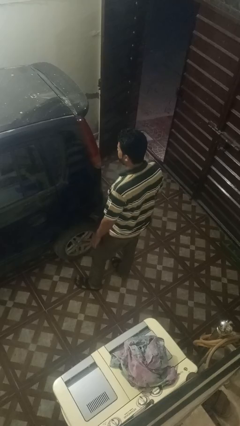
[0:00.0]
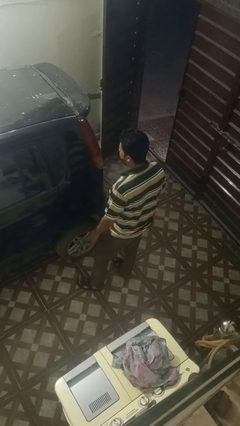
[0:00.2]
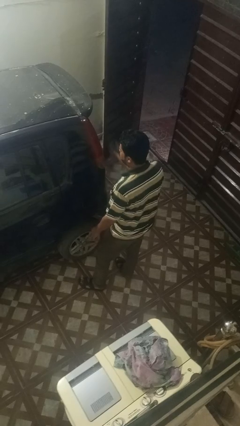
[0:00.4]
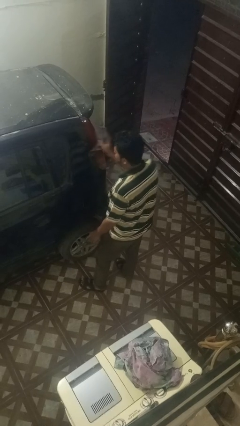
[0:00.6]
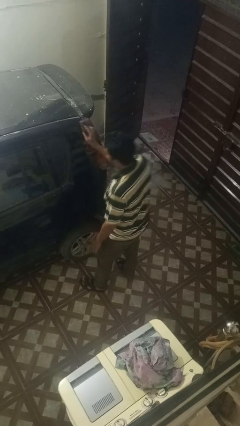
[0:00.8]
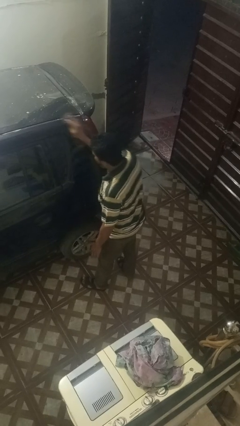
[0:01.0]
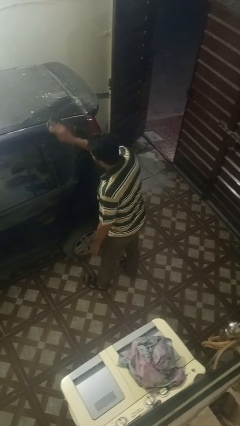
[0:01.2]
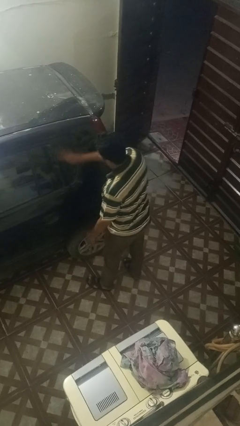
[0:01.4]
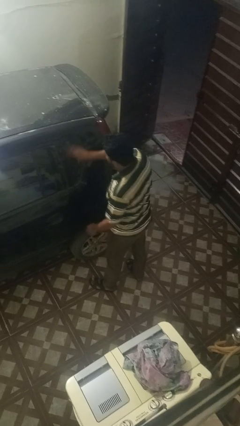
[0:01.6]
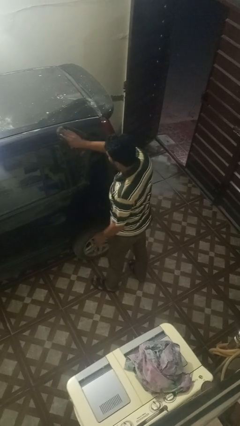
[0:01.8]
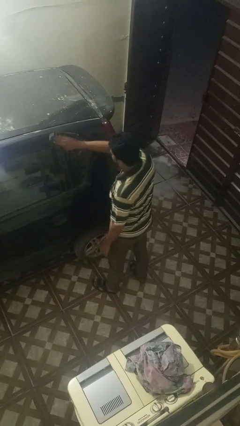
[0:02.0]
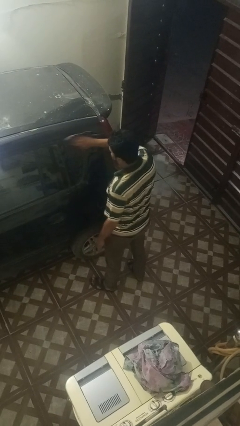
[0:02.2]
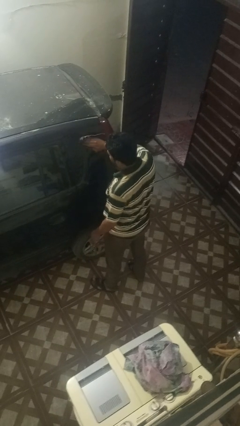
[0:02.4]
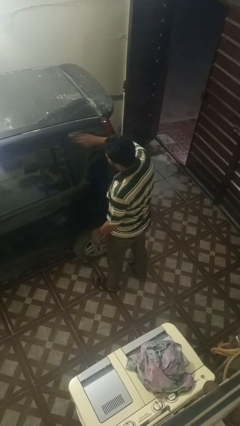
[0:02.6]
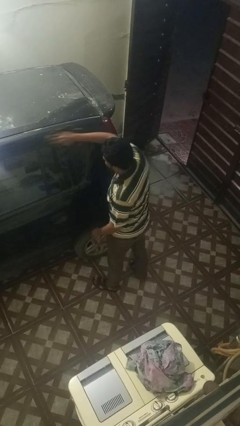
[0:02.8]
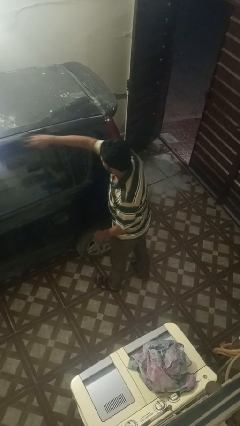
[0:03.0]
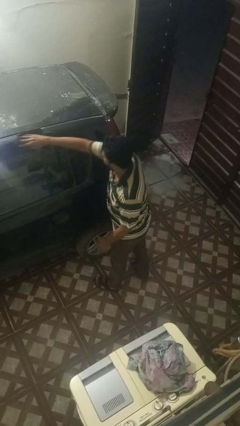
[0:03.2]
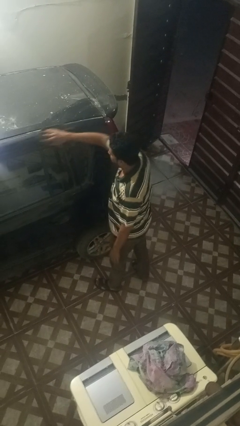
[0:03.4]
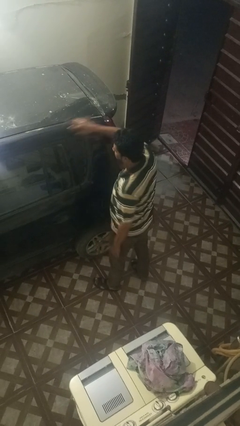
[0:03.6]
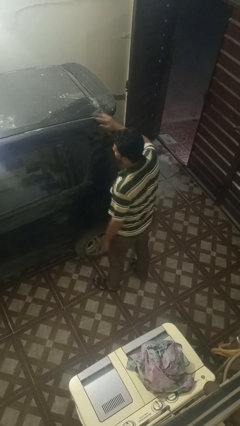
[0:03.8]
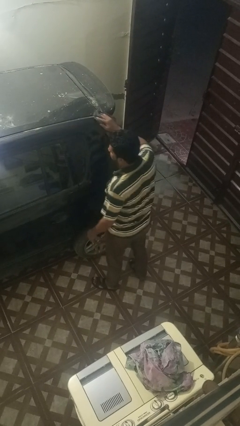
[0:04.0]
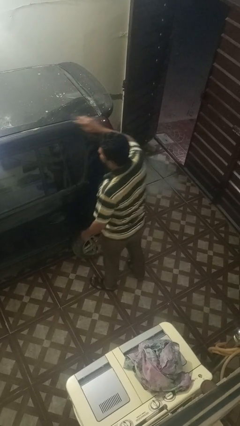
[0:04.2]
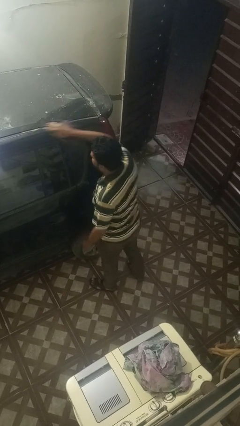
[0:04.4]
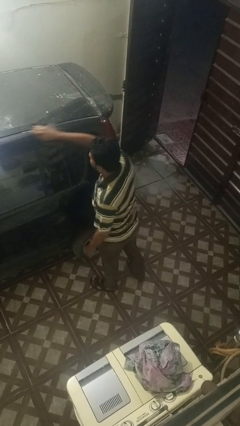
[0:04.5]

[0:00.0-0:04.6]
person polishes car with rag

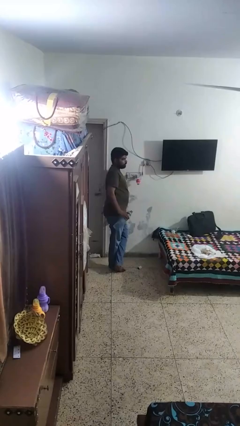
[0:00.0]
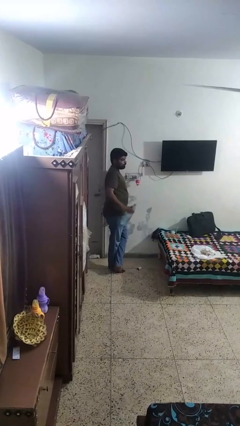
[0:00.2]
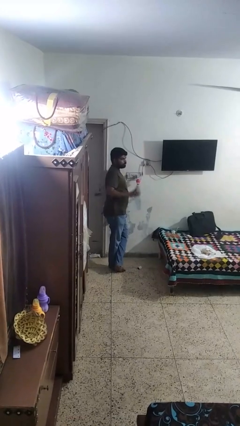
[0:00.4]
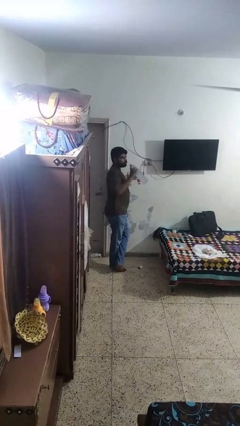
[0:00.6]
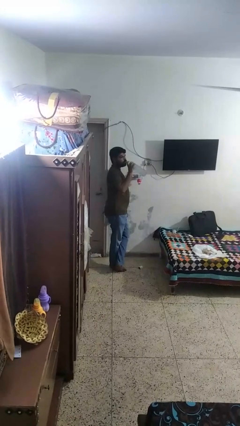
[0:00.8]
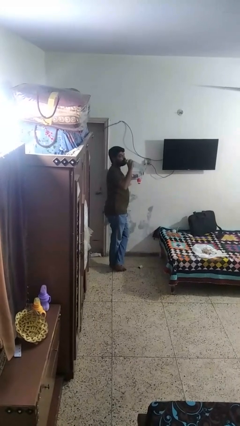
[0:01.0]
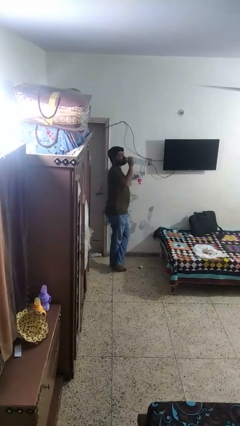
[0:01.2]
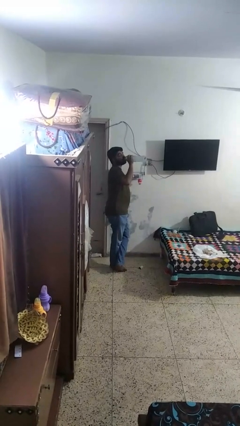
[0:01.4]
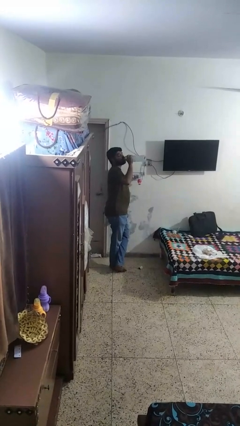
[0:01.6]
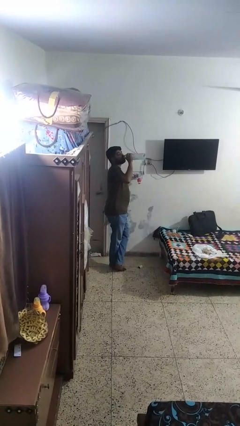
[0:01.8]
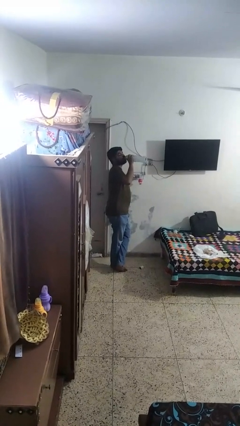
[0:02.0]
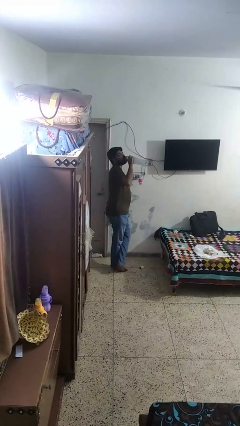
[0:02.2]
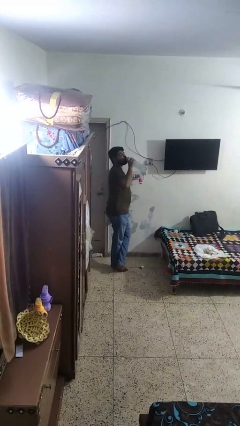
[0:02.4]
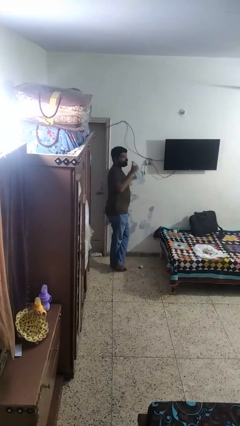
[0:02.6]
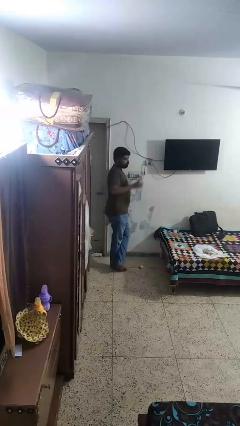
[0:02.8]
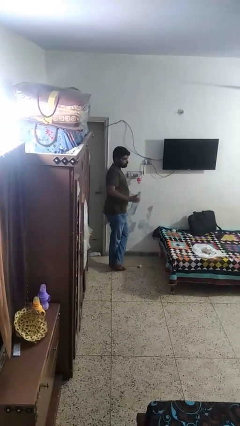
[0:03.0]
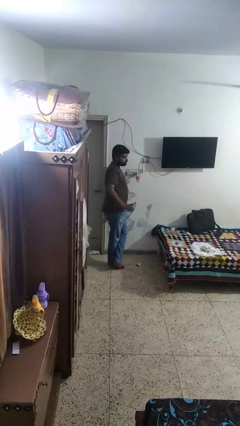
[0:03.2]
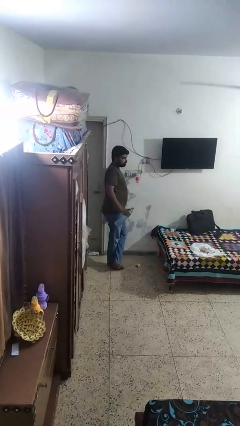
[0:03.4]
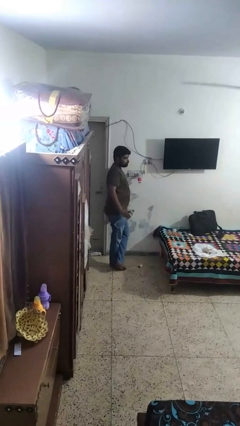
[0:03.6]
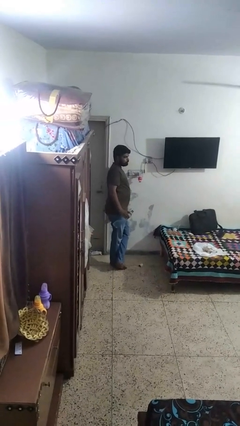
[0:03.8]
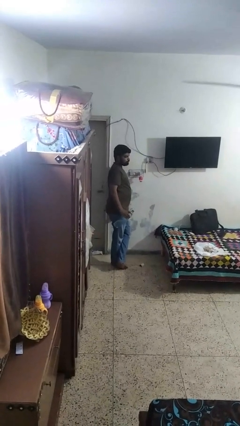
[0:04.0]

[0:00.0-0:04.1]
person drinks from bottle

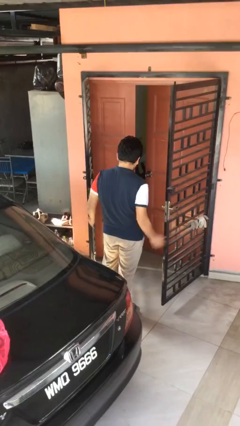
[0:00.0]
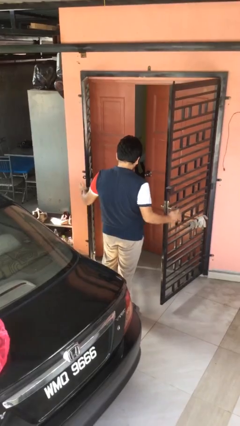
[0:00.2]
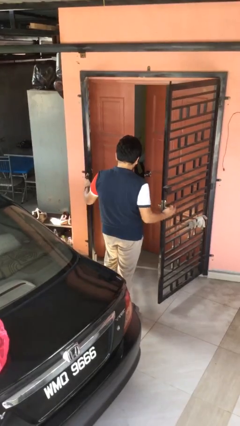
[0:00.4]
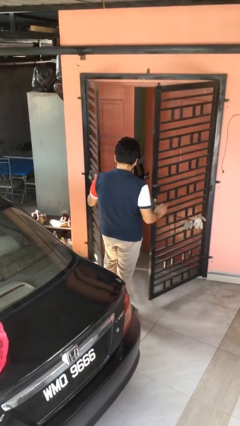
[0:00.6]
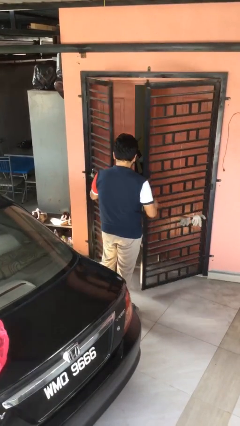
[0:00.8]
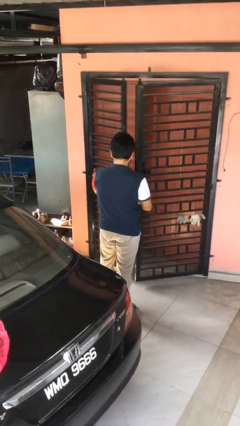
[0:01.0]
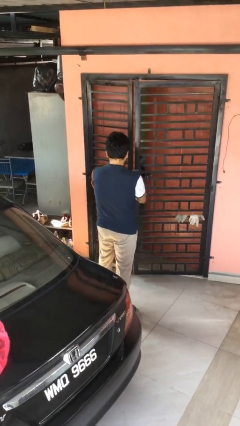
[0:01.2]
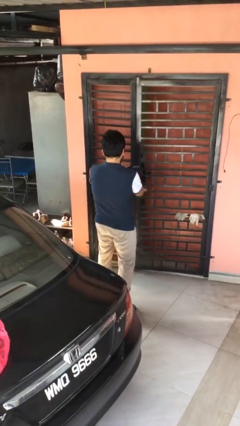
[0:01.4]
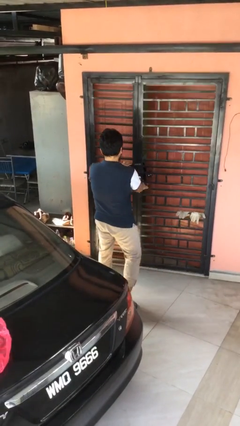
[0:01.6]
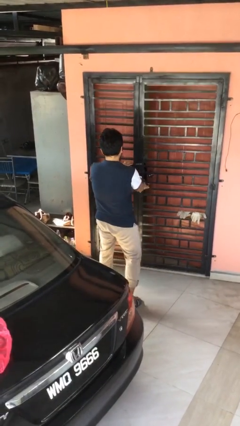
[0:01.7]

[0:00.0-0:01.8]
person closes gate

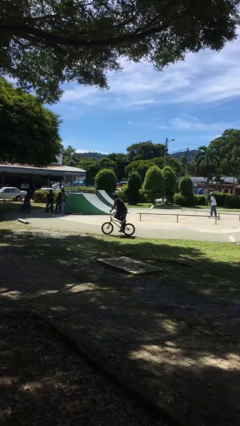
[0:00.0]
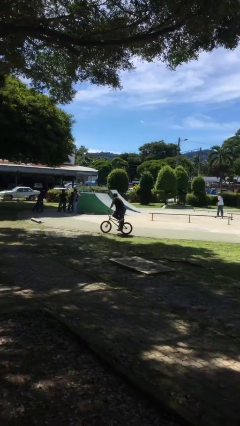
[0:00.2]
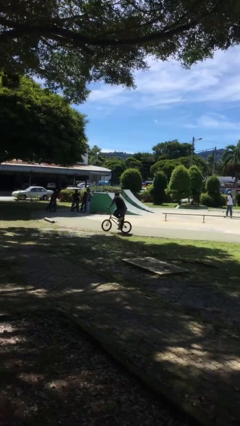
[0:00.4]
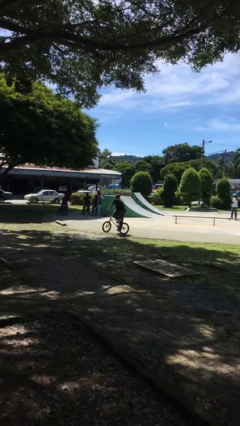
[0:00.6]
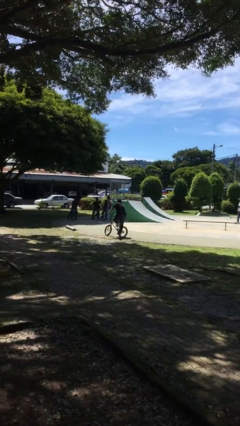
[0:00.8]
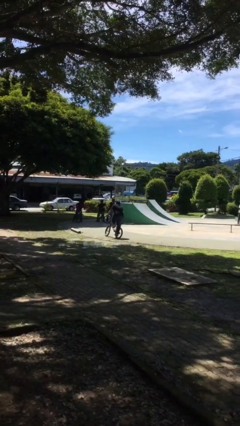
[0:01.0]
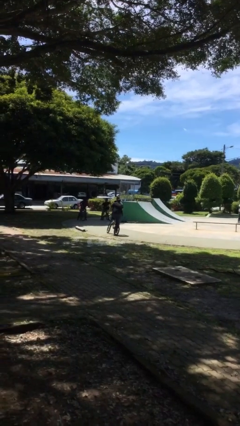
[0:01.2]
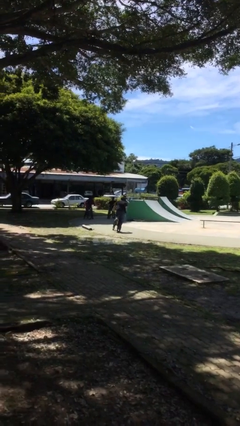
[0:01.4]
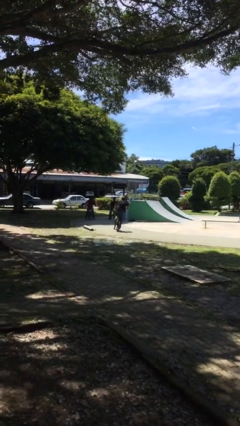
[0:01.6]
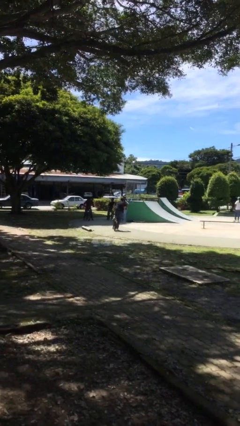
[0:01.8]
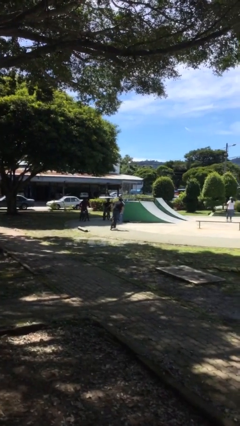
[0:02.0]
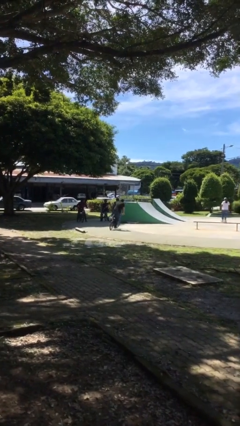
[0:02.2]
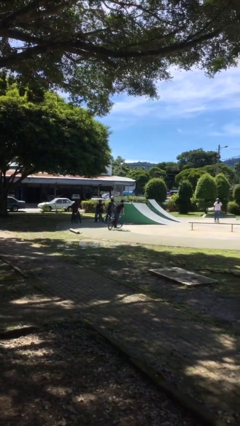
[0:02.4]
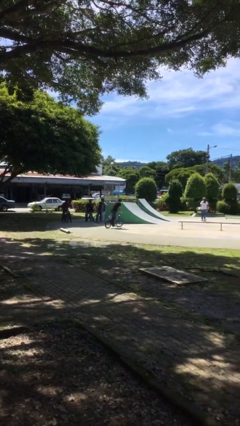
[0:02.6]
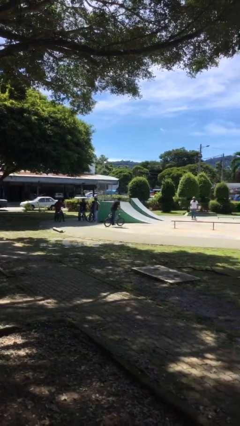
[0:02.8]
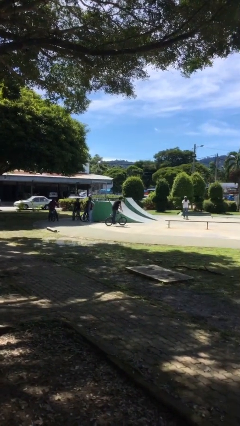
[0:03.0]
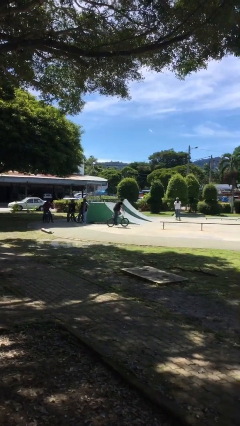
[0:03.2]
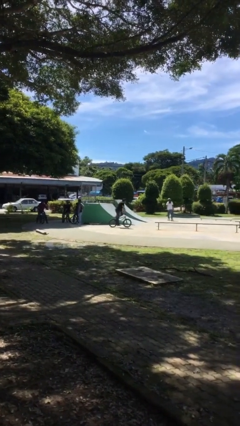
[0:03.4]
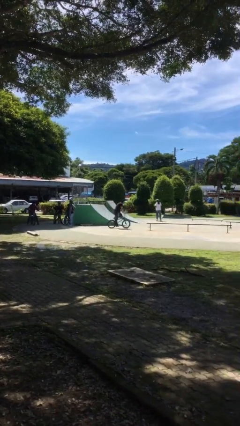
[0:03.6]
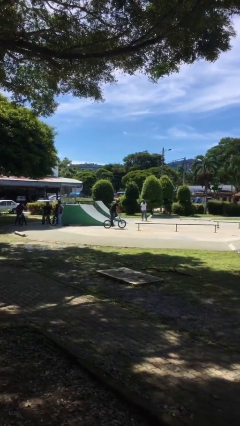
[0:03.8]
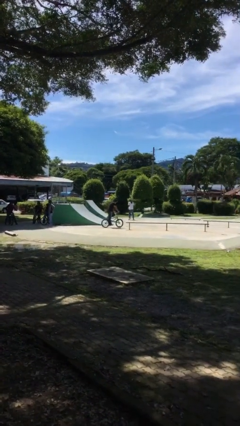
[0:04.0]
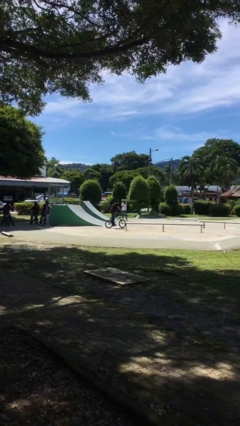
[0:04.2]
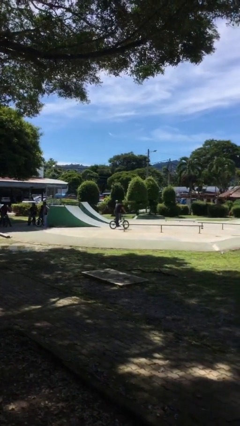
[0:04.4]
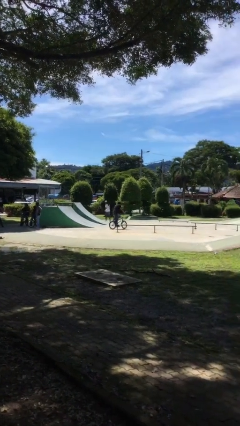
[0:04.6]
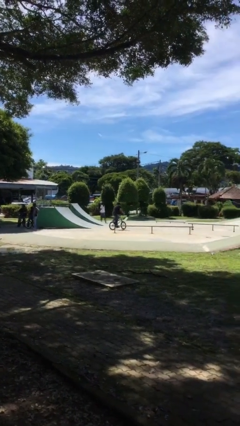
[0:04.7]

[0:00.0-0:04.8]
person rides bicycle

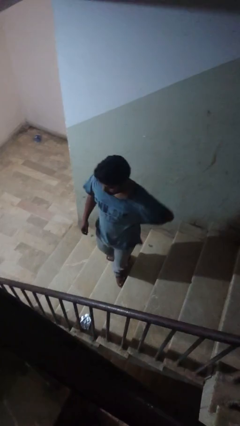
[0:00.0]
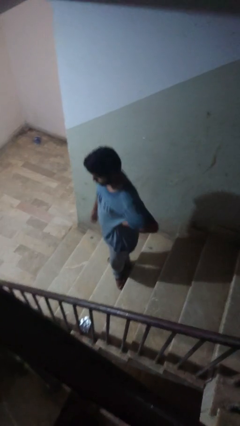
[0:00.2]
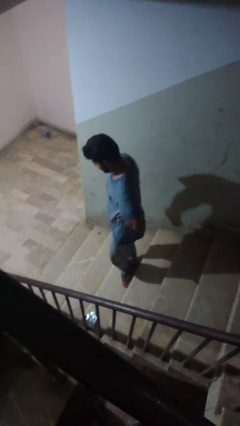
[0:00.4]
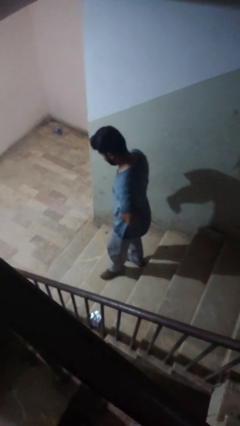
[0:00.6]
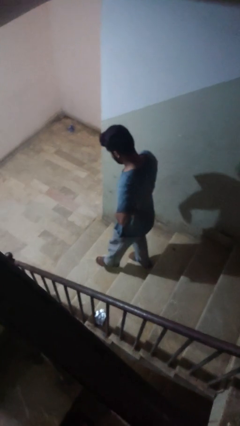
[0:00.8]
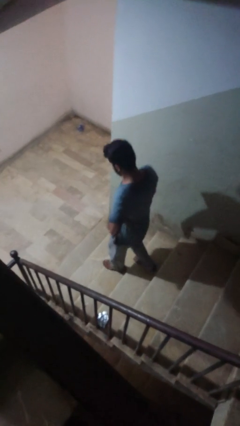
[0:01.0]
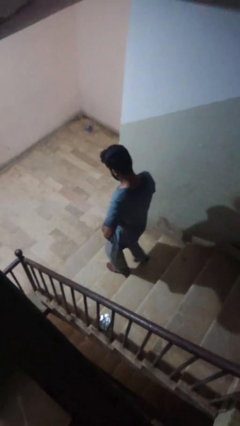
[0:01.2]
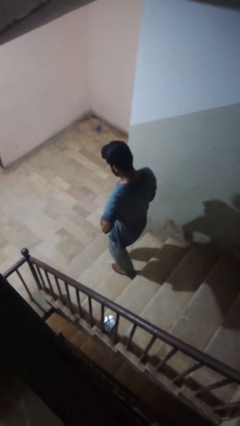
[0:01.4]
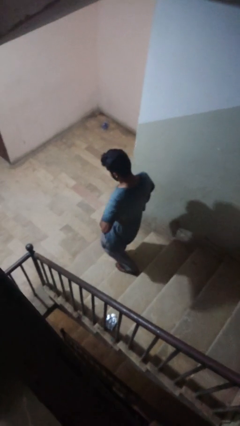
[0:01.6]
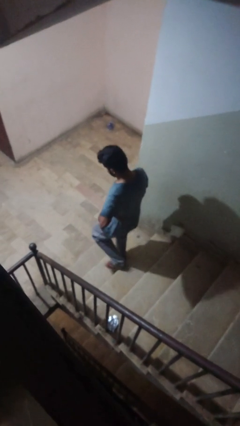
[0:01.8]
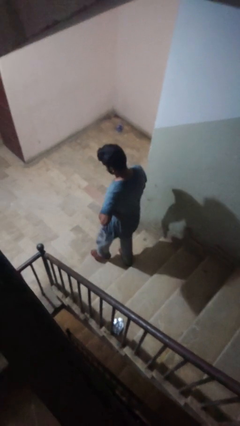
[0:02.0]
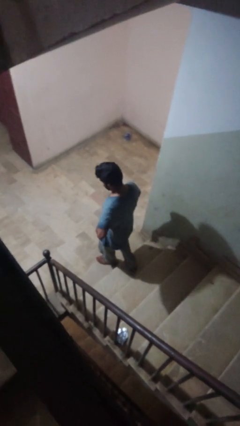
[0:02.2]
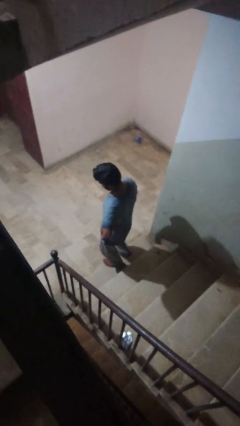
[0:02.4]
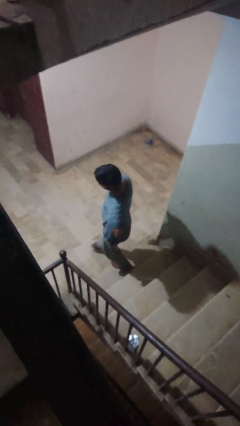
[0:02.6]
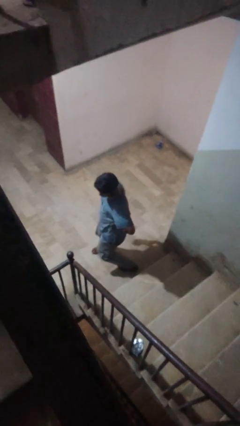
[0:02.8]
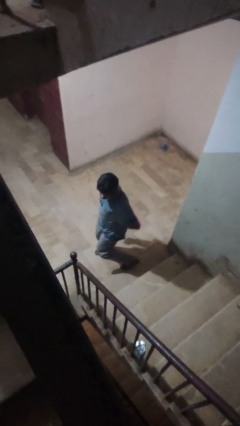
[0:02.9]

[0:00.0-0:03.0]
person climbs down stairs
